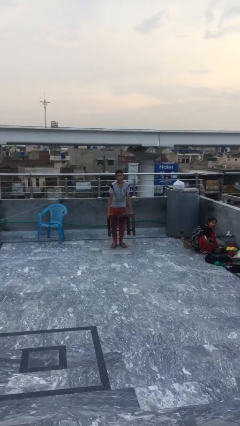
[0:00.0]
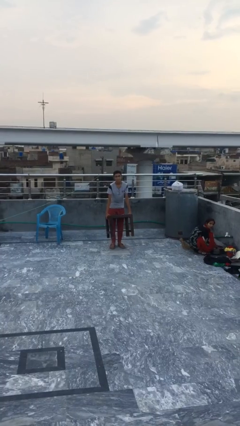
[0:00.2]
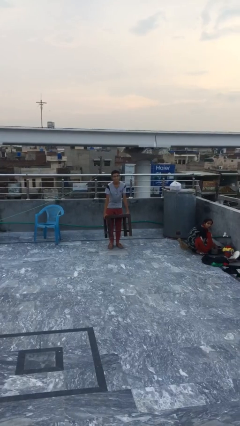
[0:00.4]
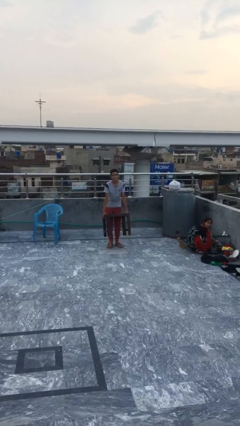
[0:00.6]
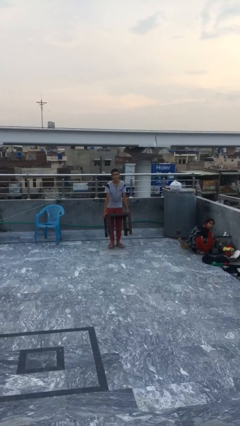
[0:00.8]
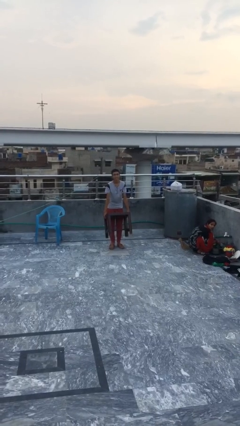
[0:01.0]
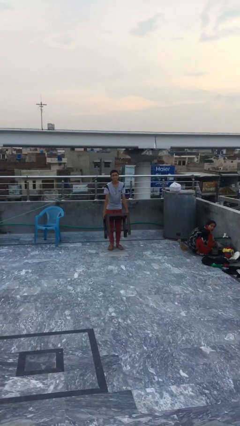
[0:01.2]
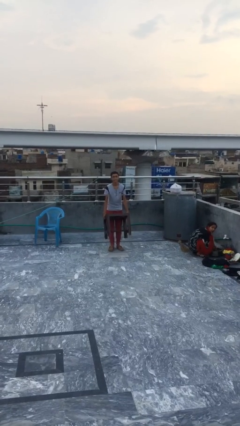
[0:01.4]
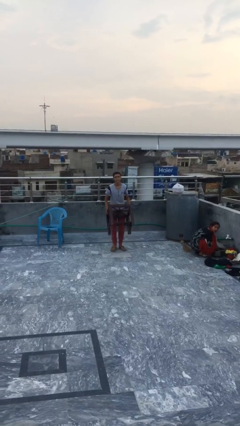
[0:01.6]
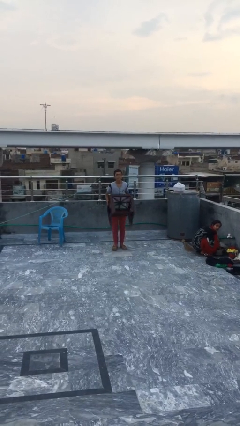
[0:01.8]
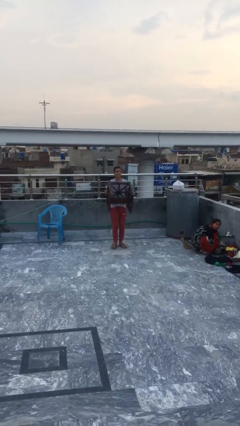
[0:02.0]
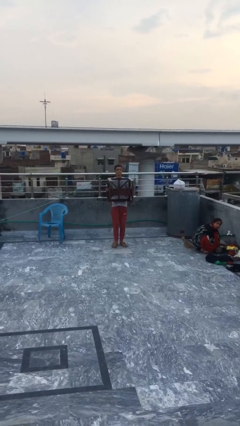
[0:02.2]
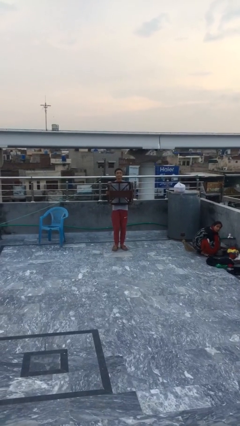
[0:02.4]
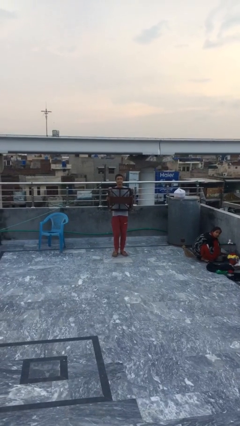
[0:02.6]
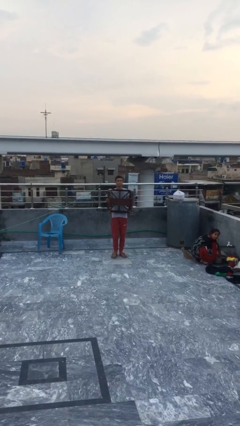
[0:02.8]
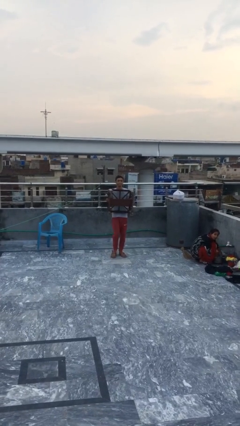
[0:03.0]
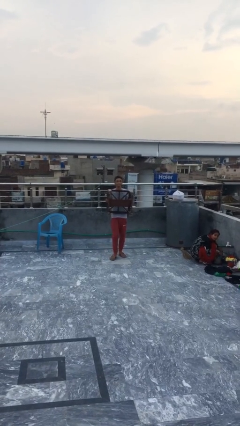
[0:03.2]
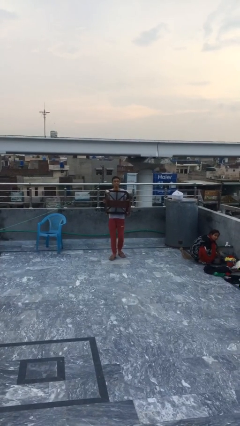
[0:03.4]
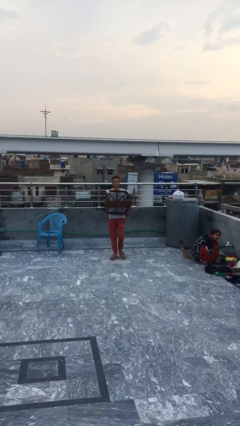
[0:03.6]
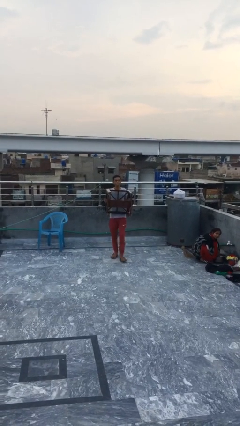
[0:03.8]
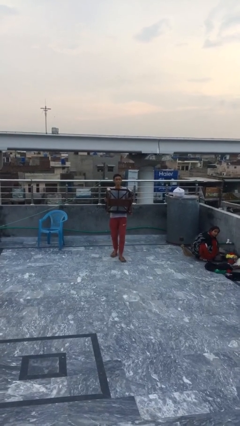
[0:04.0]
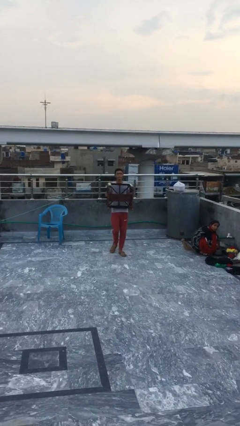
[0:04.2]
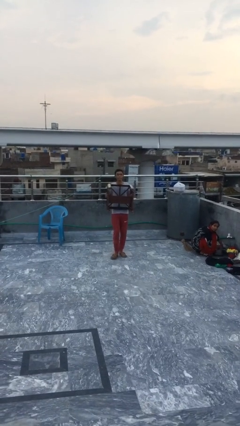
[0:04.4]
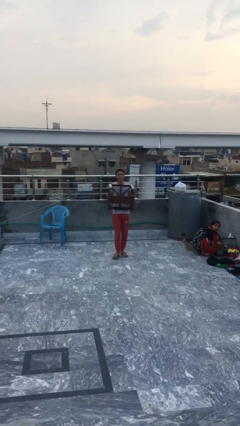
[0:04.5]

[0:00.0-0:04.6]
person carries heavy object

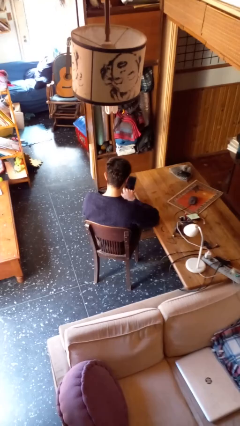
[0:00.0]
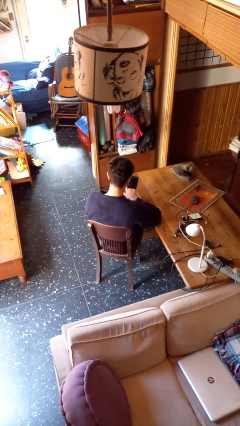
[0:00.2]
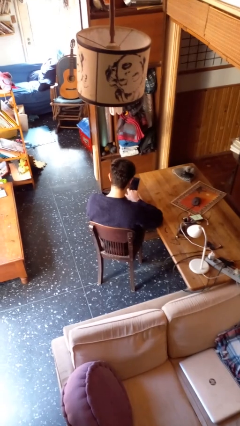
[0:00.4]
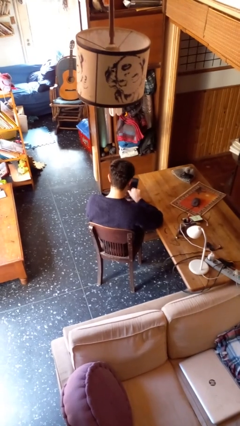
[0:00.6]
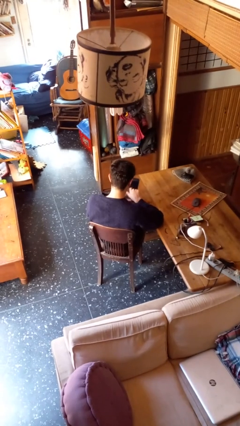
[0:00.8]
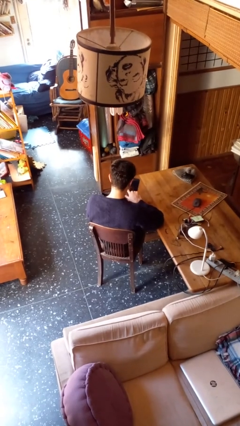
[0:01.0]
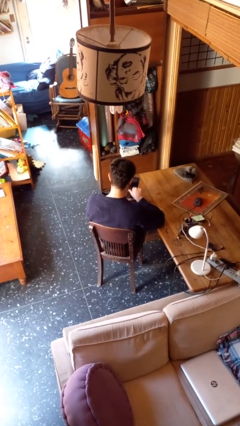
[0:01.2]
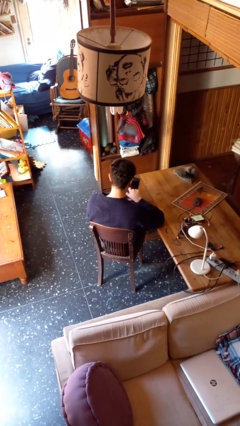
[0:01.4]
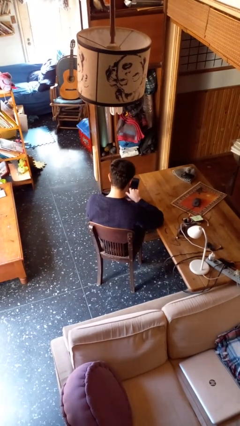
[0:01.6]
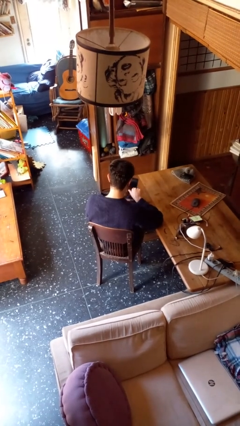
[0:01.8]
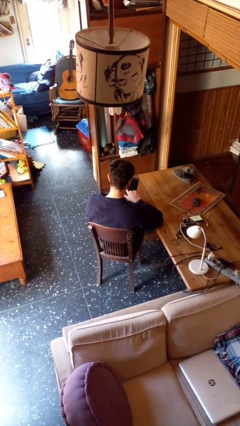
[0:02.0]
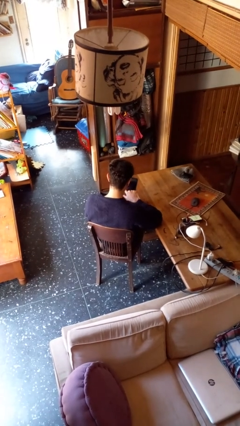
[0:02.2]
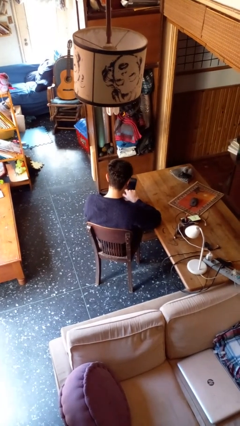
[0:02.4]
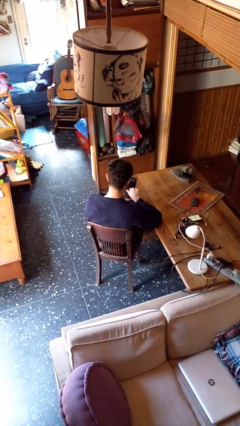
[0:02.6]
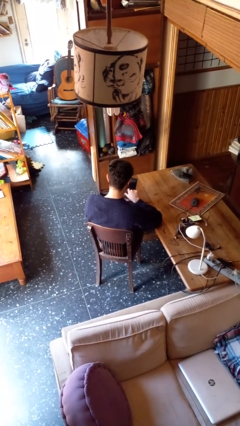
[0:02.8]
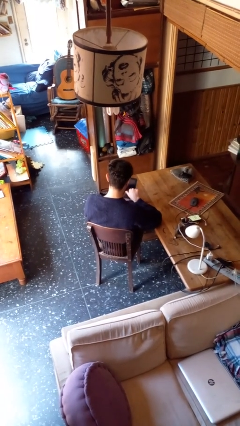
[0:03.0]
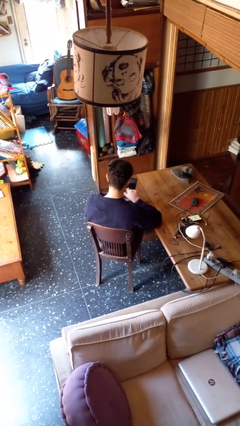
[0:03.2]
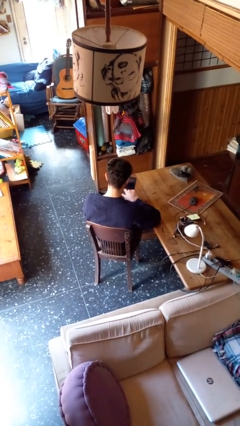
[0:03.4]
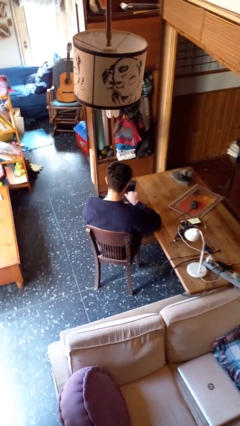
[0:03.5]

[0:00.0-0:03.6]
person interacts with tablet

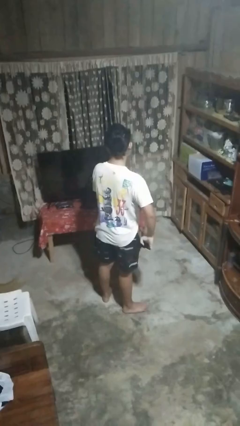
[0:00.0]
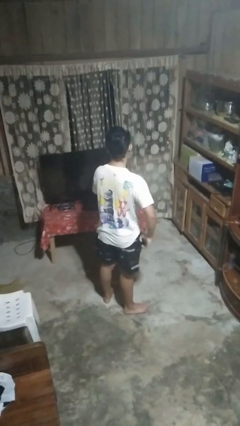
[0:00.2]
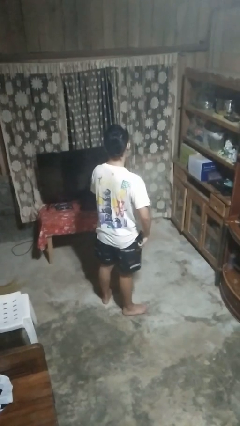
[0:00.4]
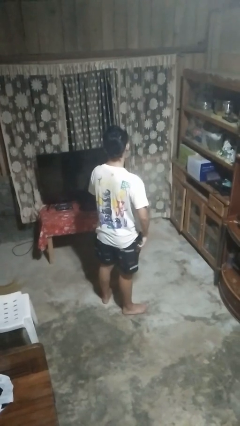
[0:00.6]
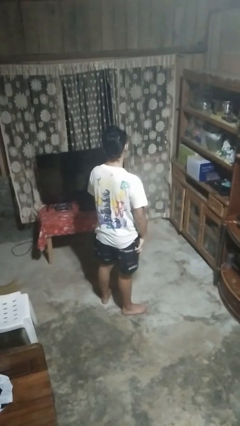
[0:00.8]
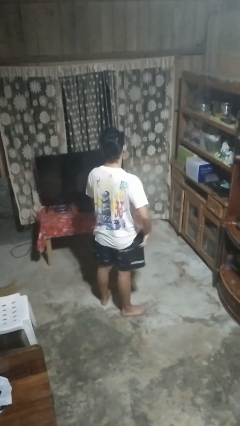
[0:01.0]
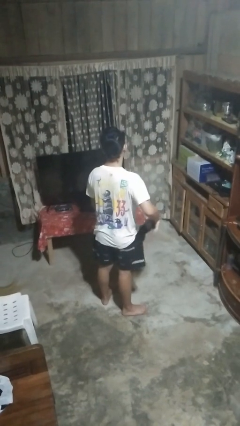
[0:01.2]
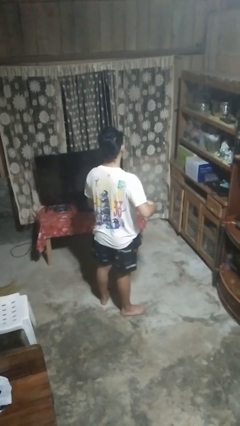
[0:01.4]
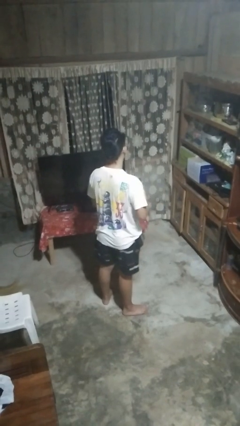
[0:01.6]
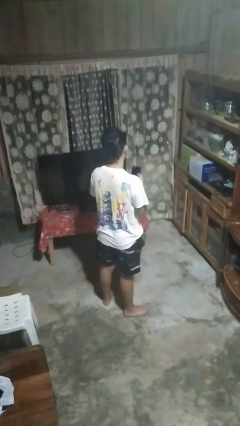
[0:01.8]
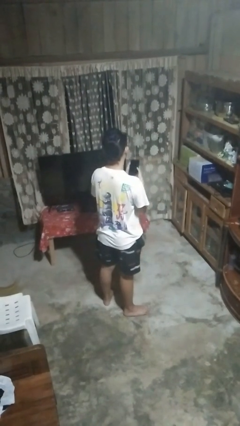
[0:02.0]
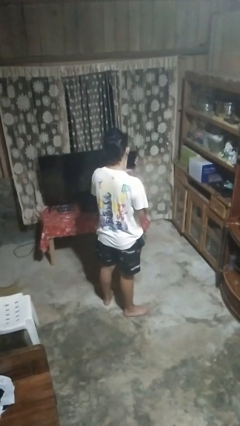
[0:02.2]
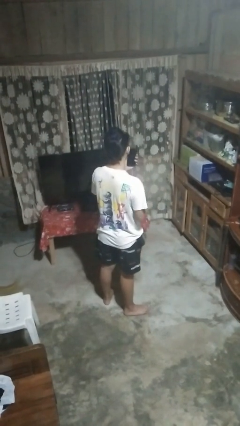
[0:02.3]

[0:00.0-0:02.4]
person takes phone from pocket

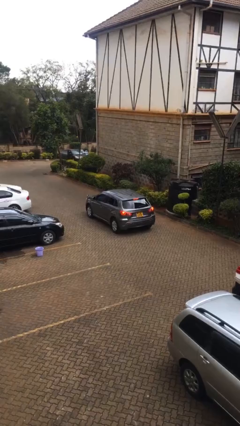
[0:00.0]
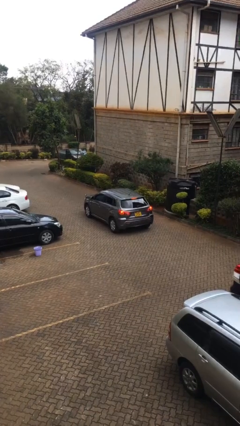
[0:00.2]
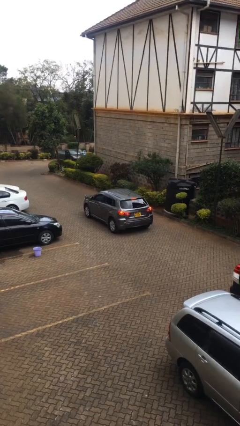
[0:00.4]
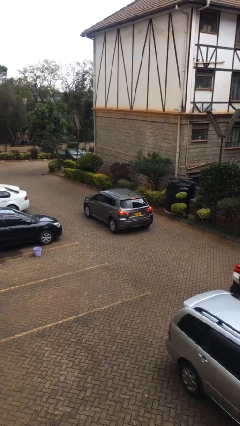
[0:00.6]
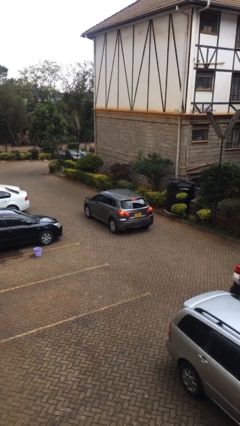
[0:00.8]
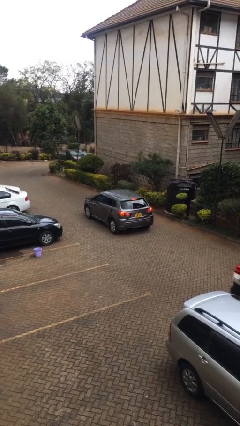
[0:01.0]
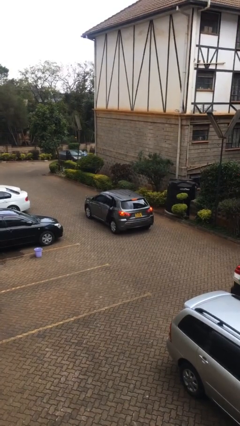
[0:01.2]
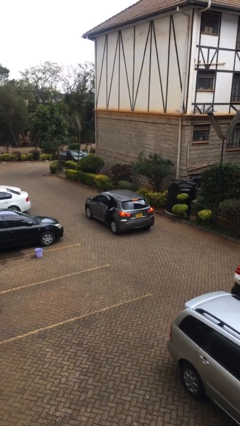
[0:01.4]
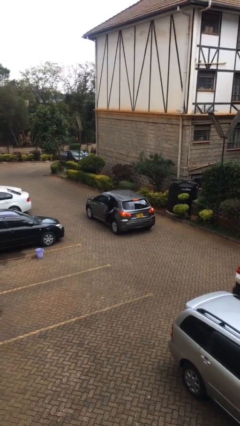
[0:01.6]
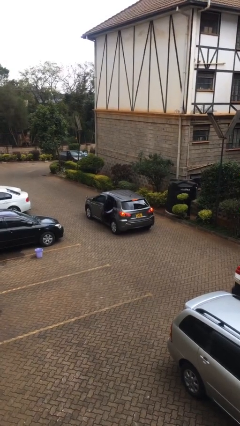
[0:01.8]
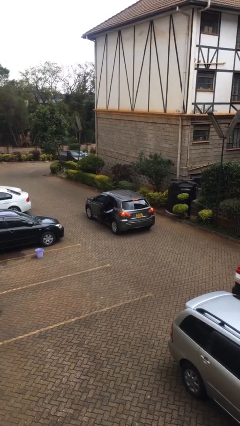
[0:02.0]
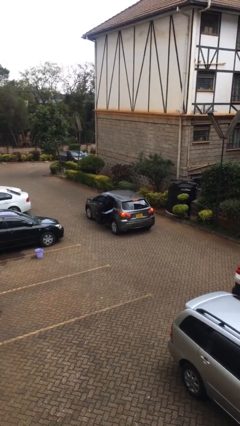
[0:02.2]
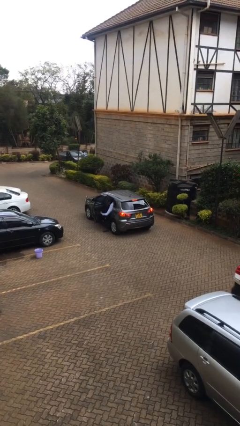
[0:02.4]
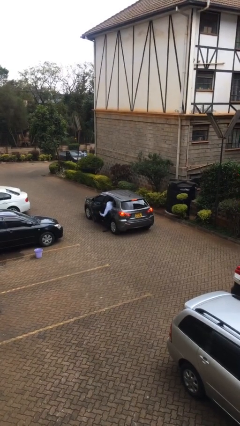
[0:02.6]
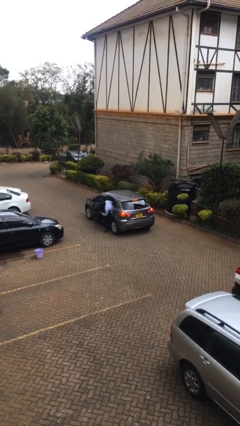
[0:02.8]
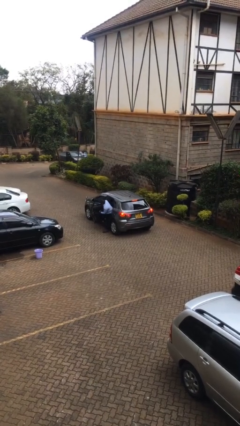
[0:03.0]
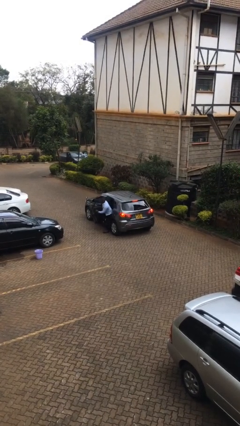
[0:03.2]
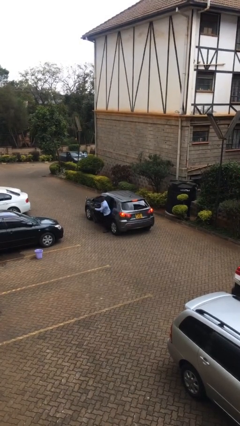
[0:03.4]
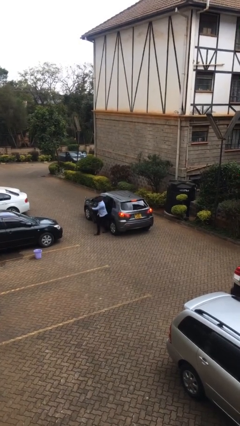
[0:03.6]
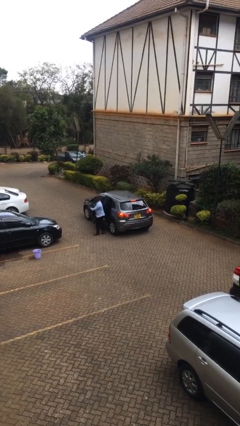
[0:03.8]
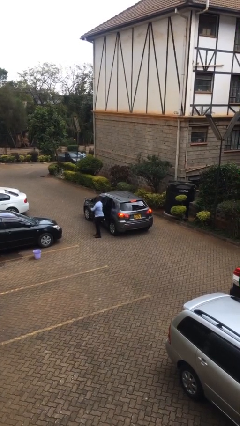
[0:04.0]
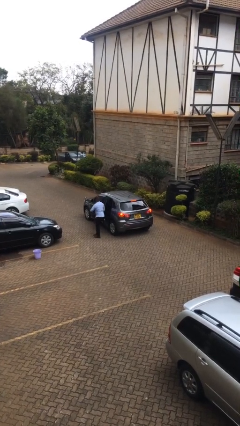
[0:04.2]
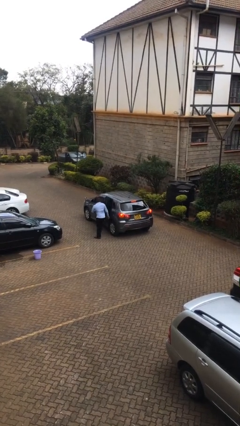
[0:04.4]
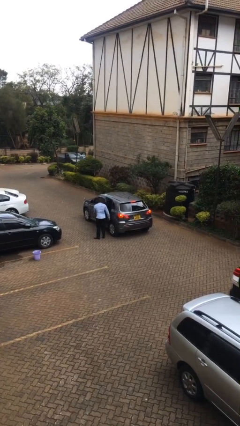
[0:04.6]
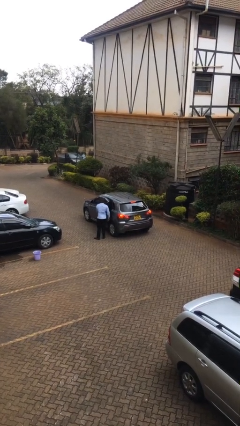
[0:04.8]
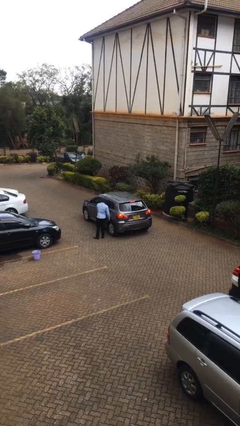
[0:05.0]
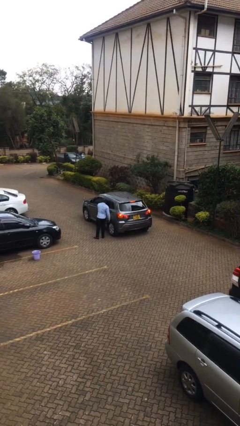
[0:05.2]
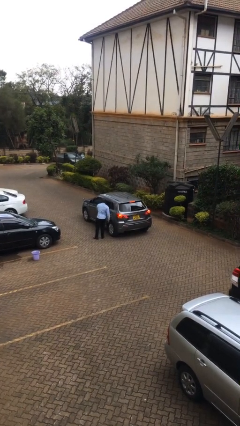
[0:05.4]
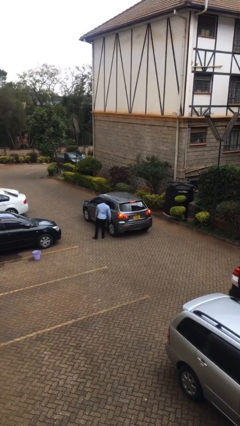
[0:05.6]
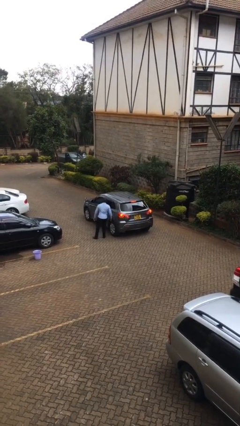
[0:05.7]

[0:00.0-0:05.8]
car drops off person

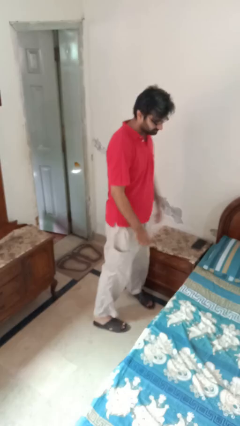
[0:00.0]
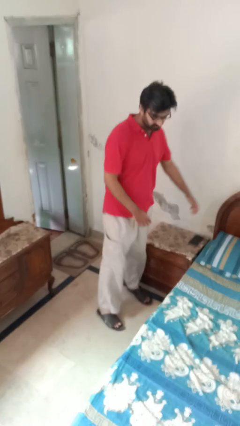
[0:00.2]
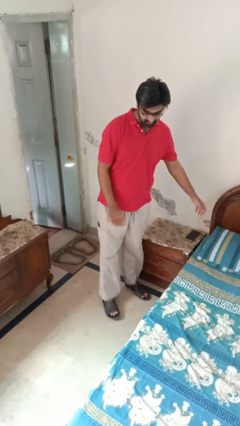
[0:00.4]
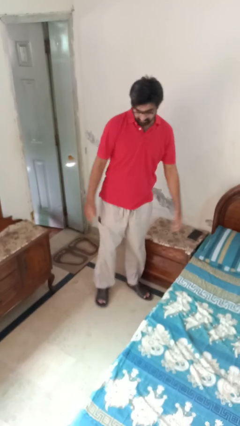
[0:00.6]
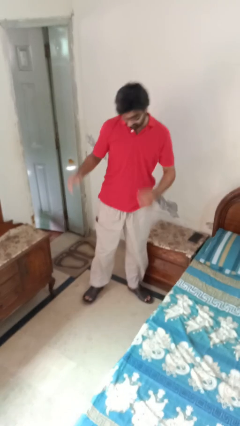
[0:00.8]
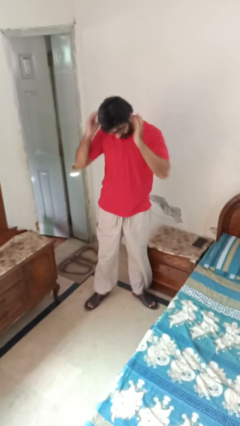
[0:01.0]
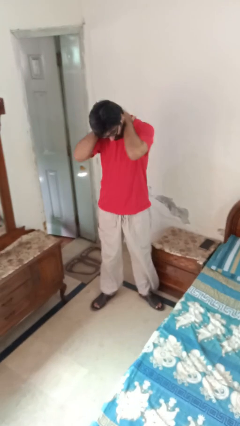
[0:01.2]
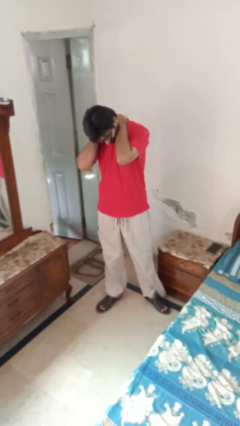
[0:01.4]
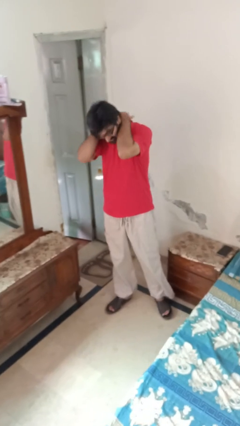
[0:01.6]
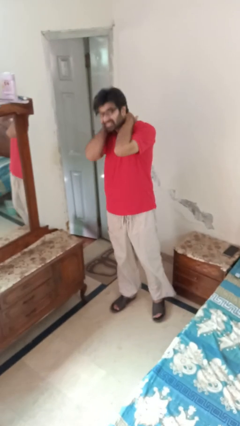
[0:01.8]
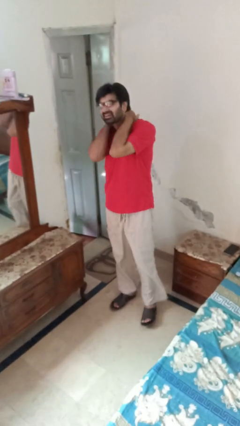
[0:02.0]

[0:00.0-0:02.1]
person rubs neck
